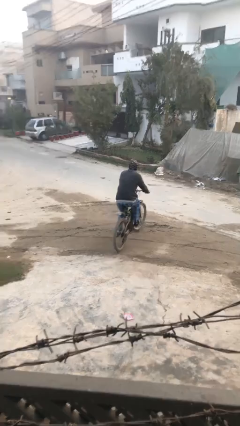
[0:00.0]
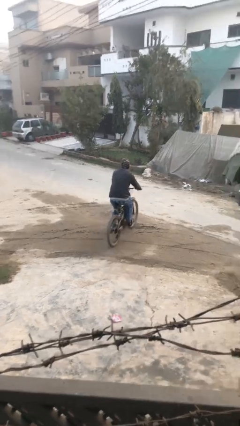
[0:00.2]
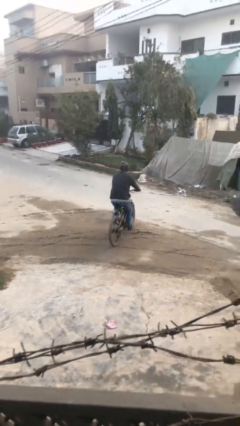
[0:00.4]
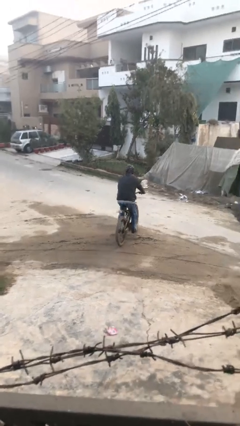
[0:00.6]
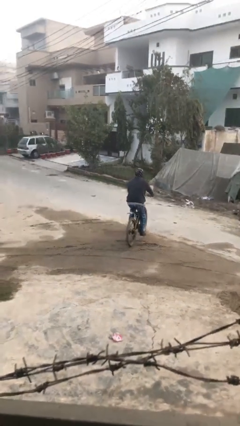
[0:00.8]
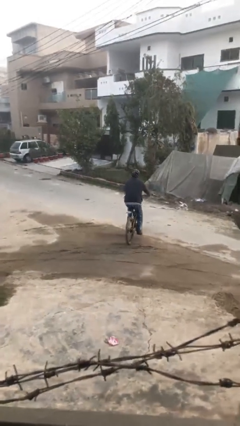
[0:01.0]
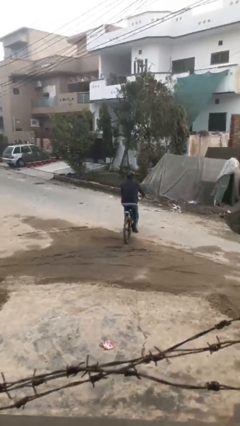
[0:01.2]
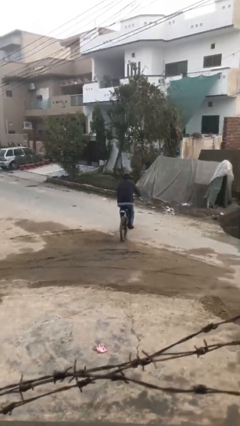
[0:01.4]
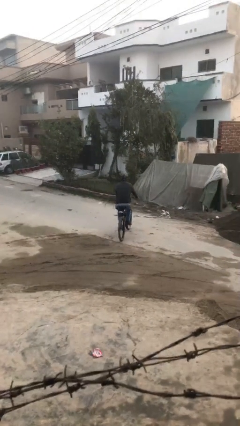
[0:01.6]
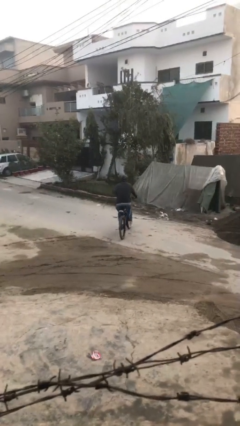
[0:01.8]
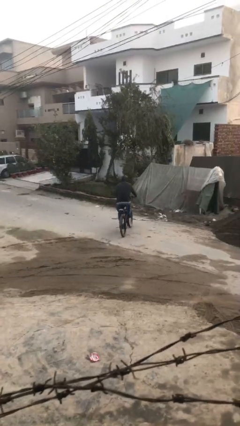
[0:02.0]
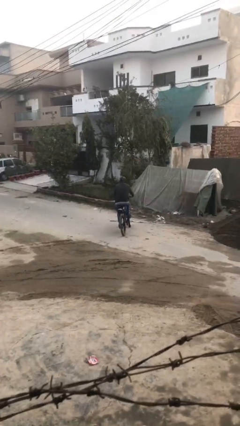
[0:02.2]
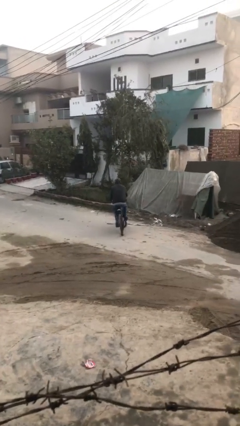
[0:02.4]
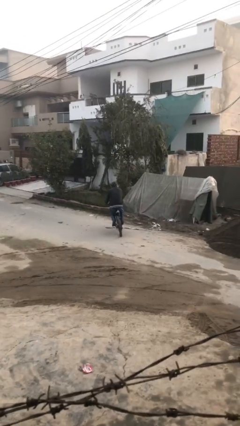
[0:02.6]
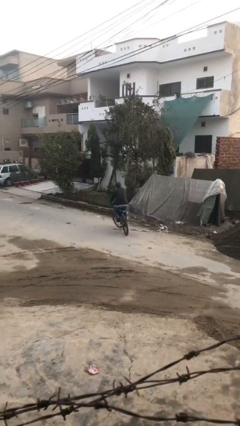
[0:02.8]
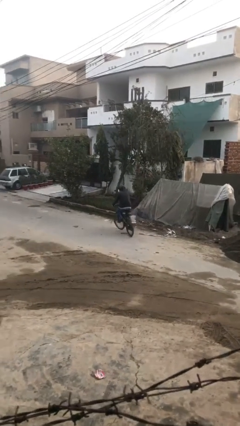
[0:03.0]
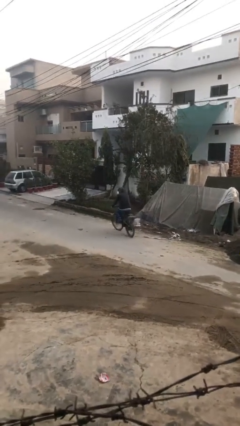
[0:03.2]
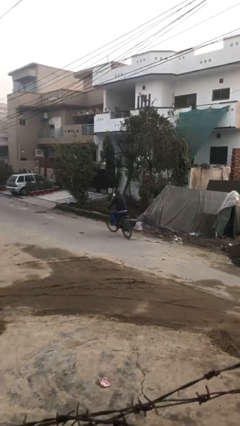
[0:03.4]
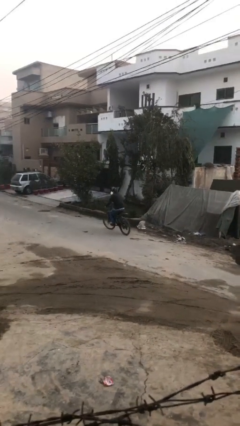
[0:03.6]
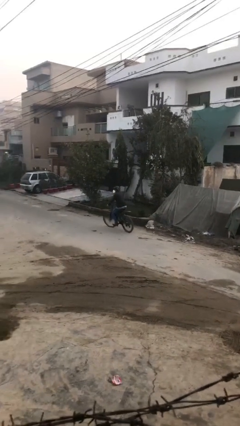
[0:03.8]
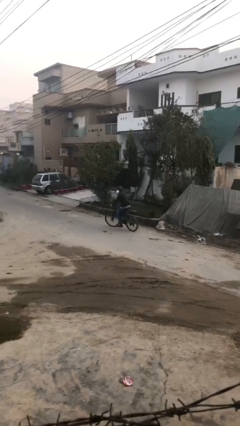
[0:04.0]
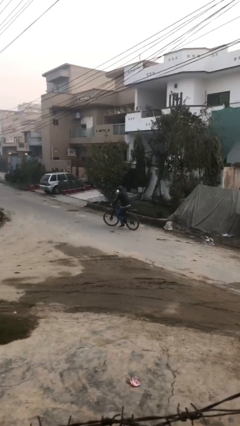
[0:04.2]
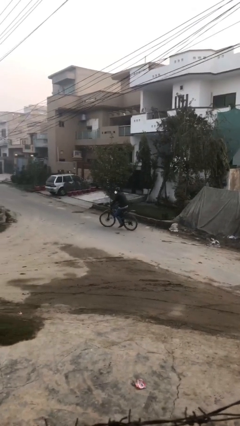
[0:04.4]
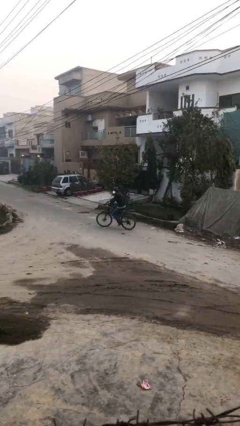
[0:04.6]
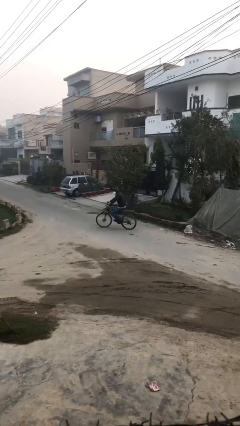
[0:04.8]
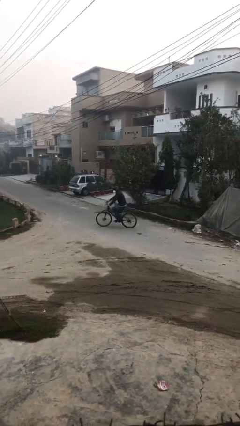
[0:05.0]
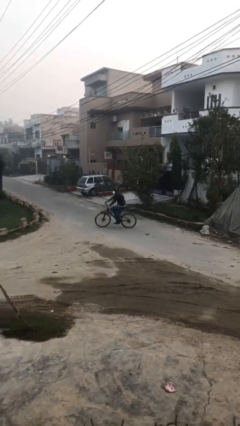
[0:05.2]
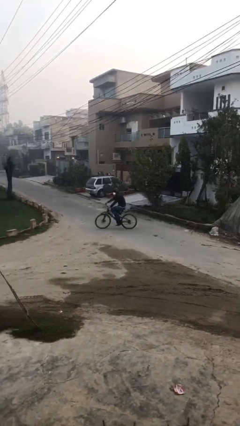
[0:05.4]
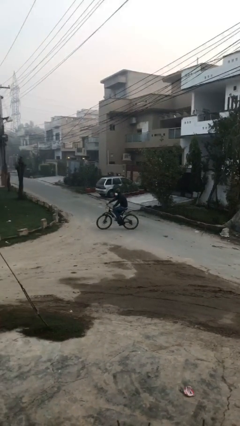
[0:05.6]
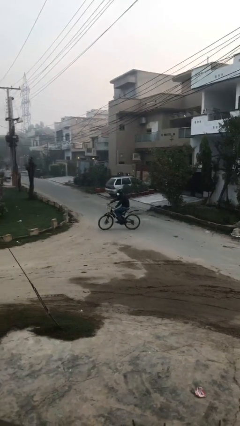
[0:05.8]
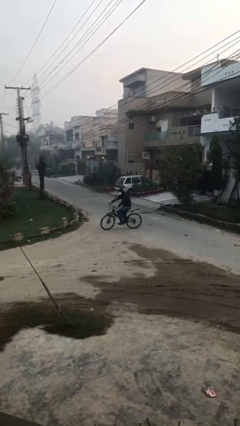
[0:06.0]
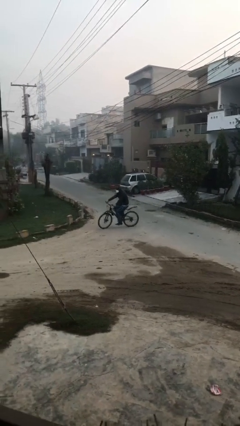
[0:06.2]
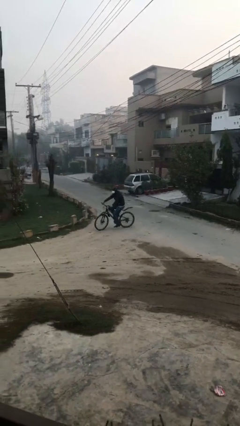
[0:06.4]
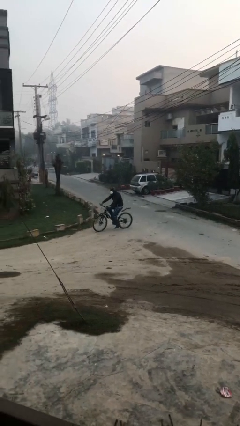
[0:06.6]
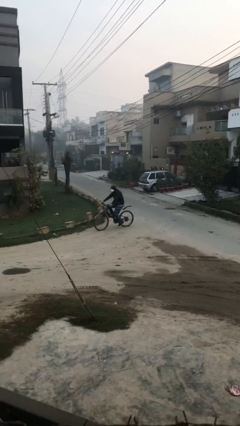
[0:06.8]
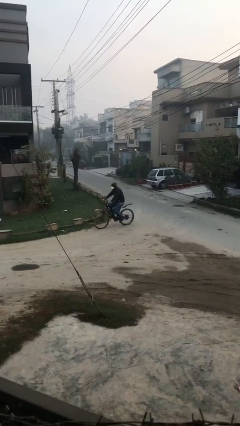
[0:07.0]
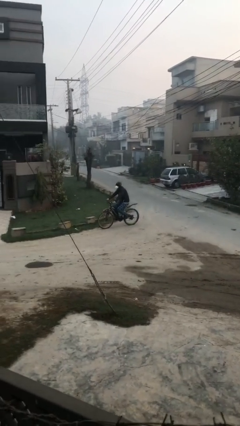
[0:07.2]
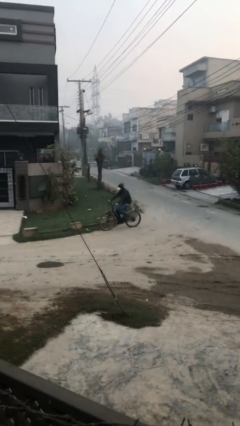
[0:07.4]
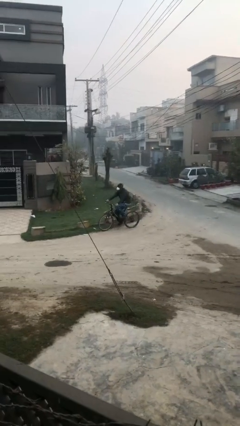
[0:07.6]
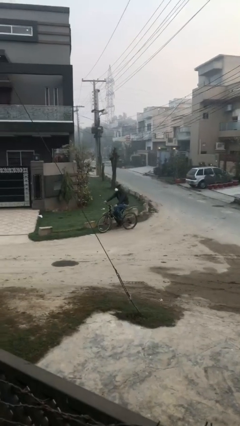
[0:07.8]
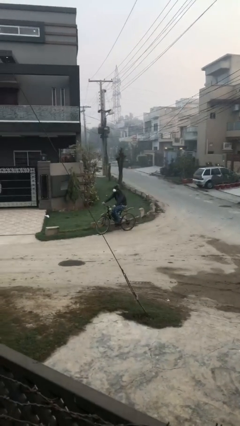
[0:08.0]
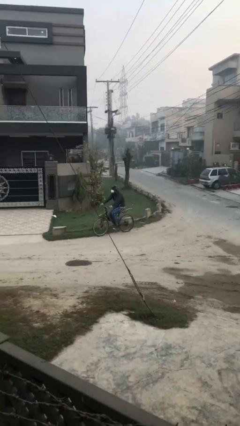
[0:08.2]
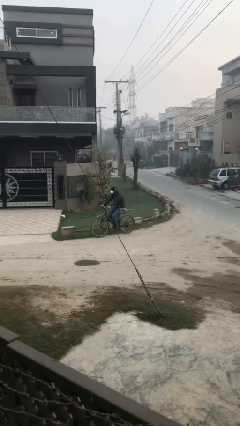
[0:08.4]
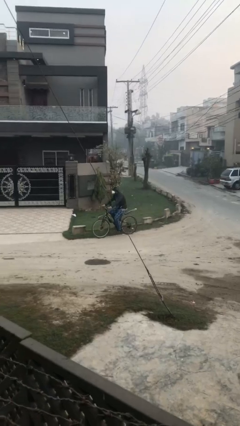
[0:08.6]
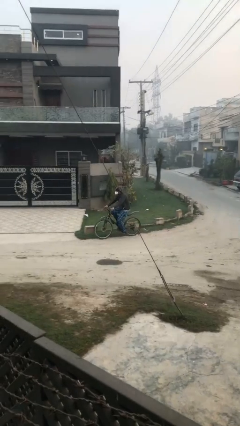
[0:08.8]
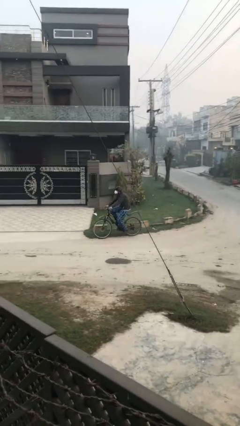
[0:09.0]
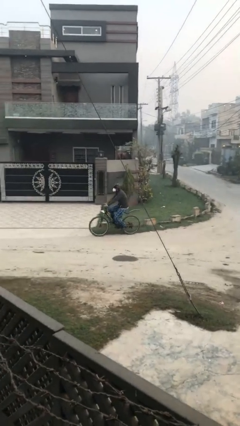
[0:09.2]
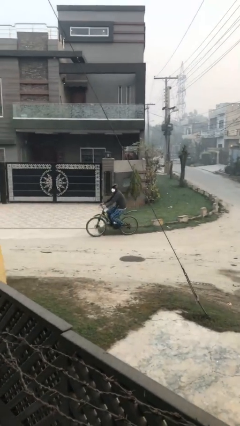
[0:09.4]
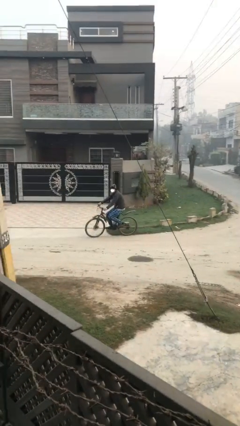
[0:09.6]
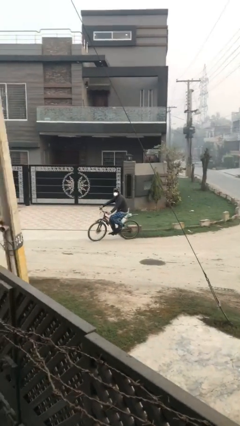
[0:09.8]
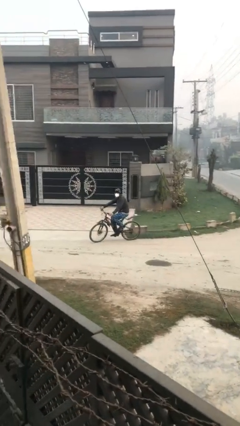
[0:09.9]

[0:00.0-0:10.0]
person rides bicycle

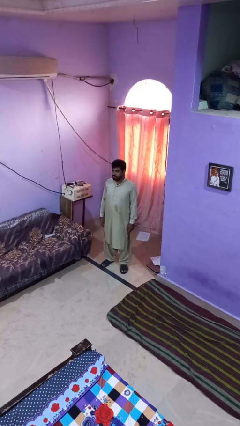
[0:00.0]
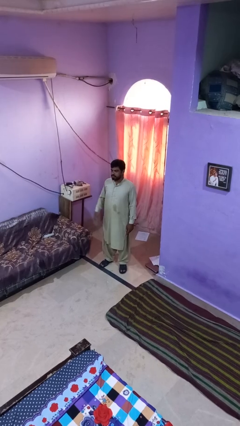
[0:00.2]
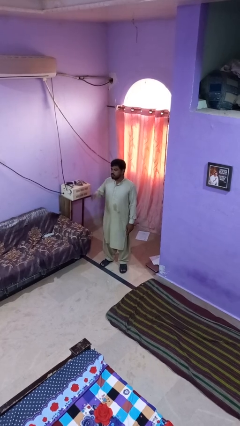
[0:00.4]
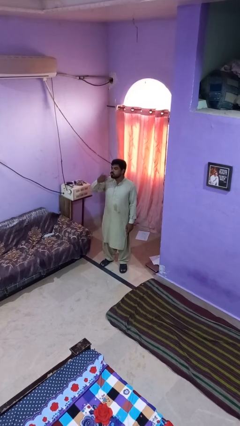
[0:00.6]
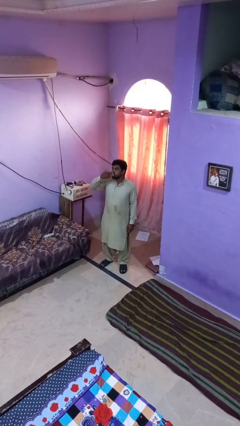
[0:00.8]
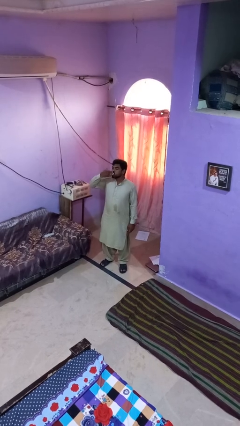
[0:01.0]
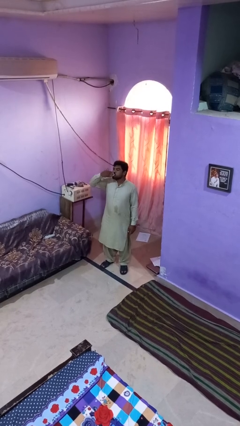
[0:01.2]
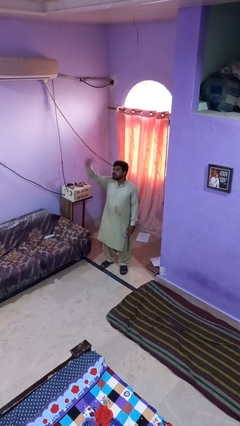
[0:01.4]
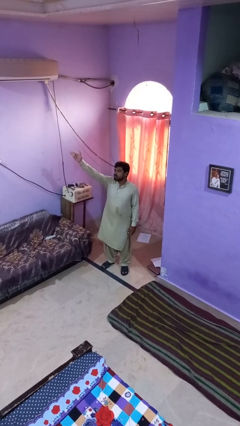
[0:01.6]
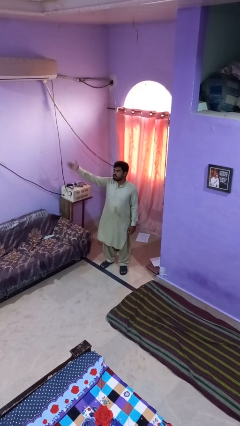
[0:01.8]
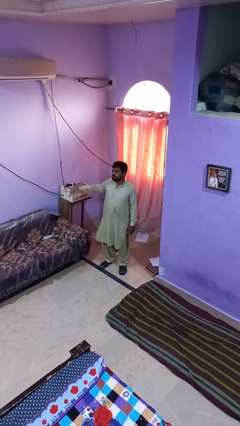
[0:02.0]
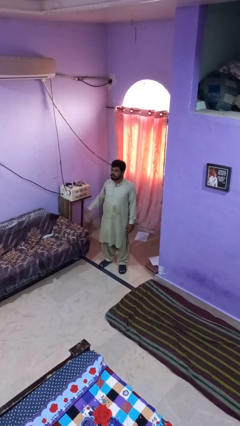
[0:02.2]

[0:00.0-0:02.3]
person gestures blow kiss

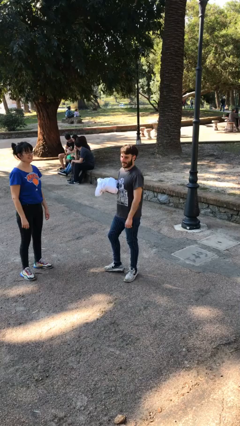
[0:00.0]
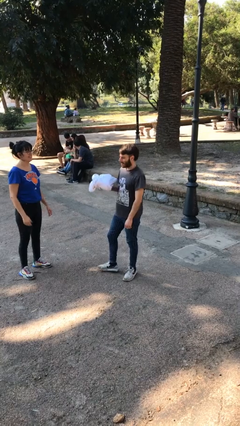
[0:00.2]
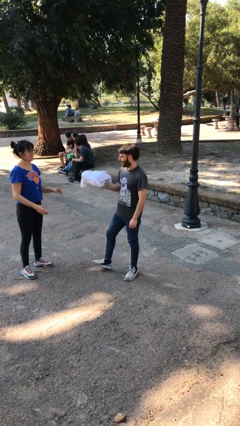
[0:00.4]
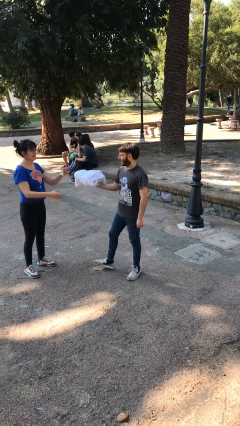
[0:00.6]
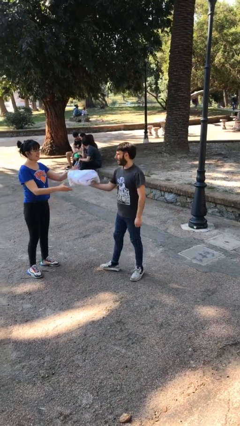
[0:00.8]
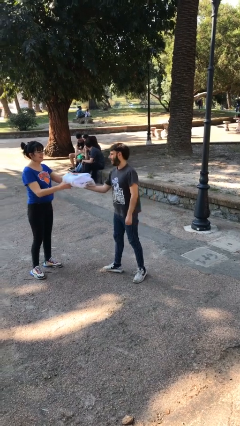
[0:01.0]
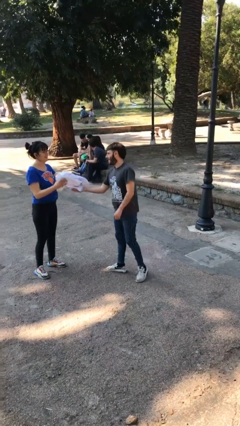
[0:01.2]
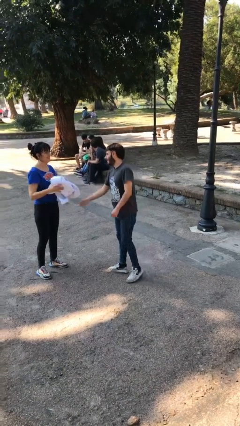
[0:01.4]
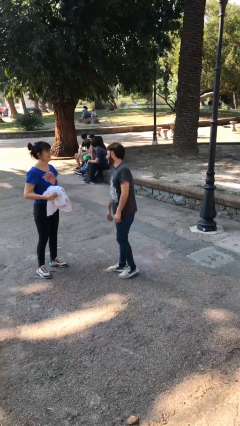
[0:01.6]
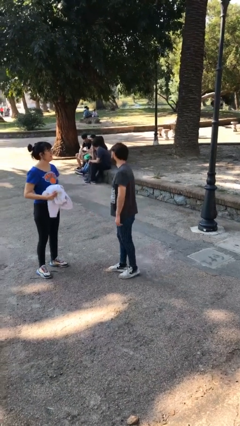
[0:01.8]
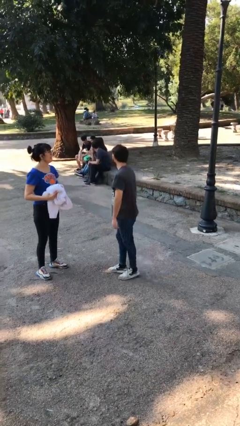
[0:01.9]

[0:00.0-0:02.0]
person transfers object to person

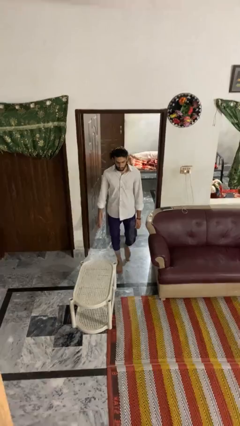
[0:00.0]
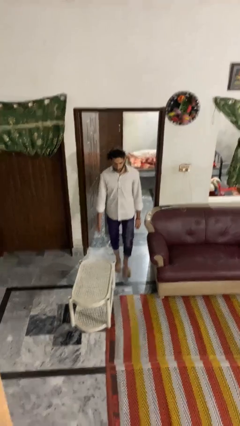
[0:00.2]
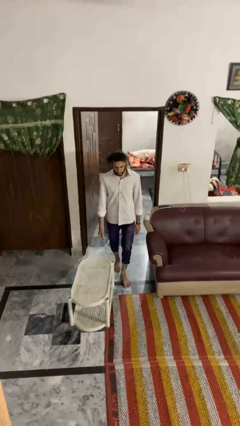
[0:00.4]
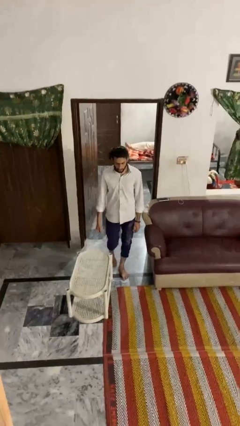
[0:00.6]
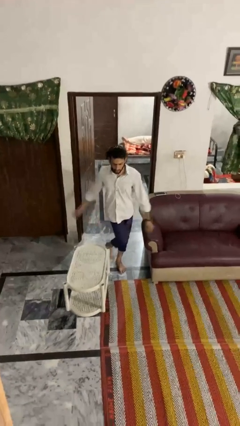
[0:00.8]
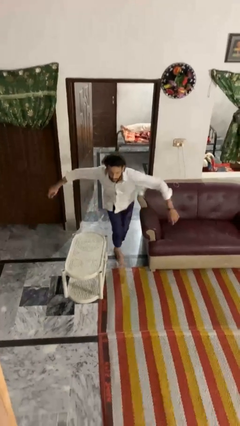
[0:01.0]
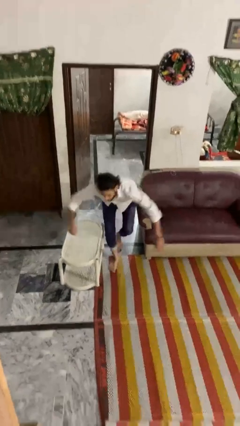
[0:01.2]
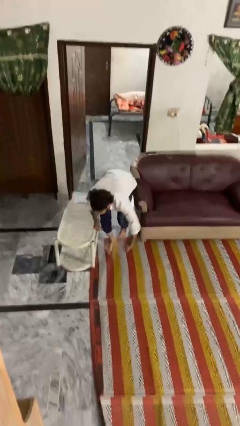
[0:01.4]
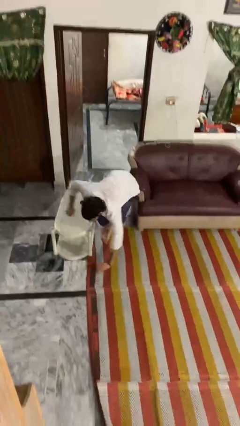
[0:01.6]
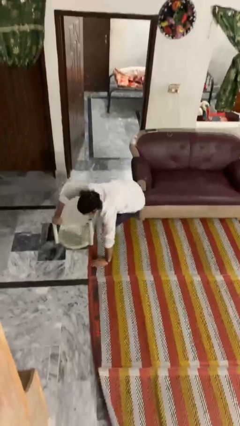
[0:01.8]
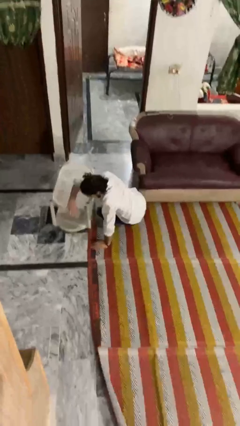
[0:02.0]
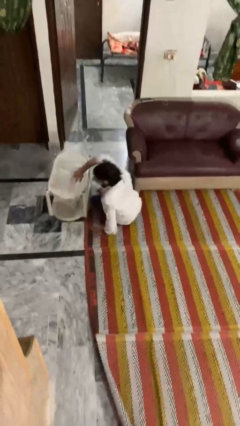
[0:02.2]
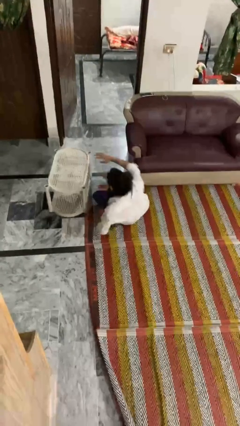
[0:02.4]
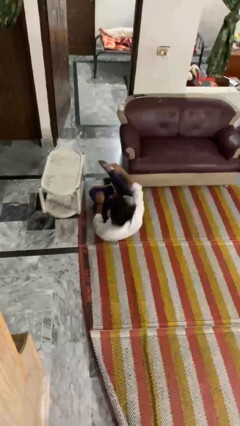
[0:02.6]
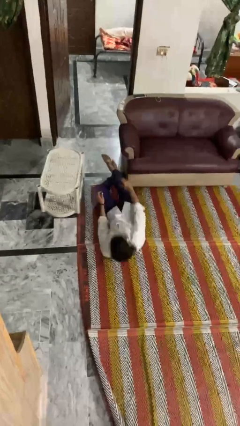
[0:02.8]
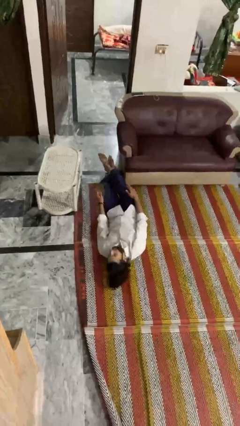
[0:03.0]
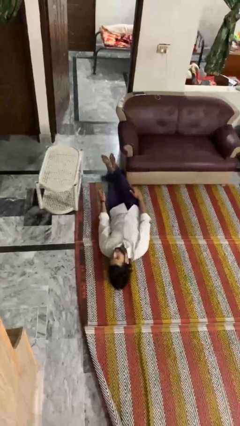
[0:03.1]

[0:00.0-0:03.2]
person trips on object on floor

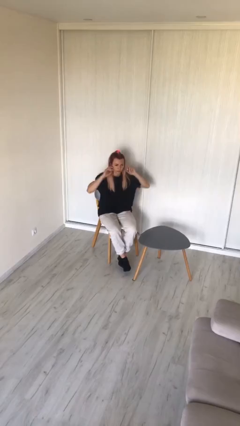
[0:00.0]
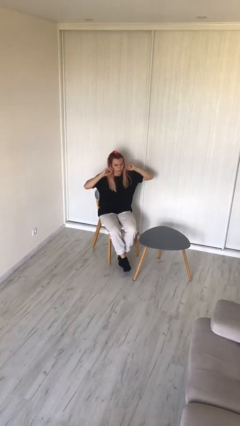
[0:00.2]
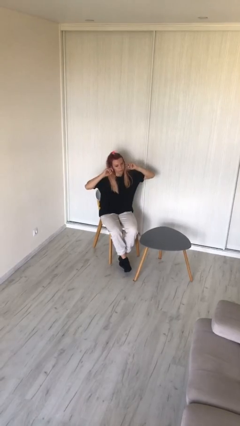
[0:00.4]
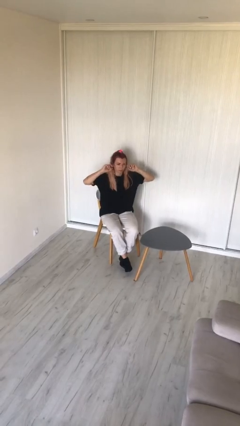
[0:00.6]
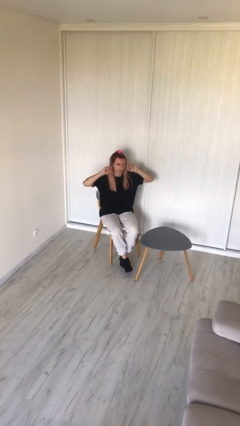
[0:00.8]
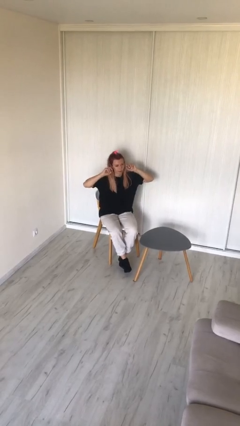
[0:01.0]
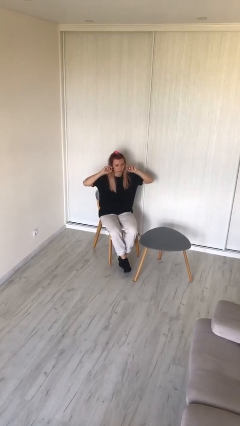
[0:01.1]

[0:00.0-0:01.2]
person puts fingers in ear
